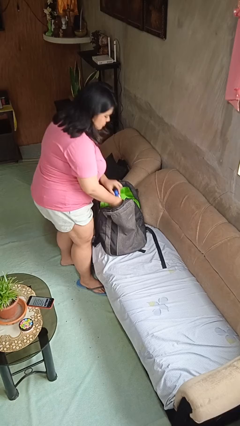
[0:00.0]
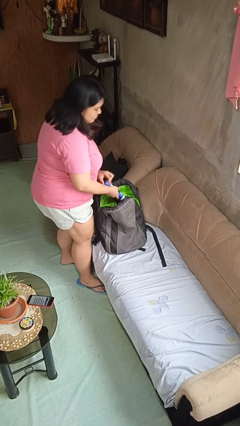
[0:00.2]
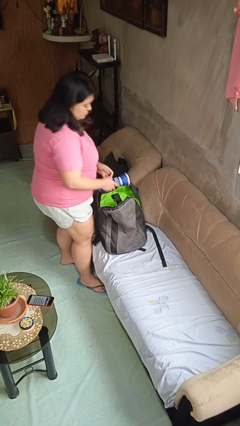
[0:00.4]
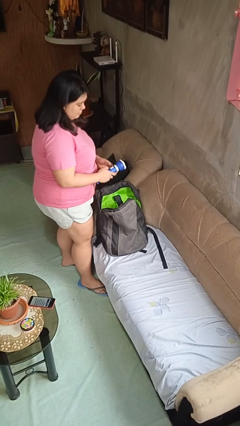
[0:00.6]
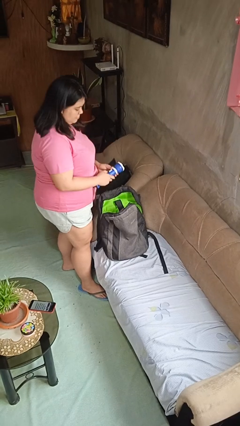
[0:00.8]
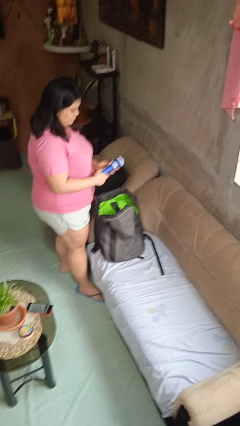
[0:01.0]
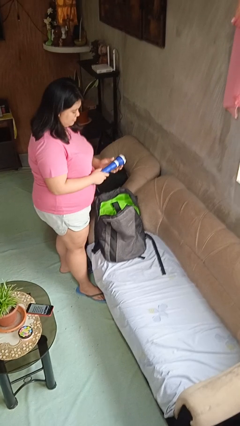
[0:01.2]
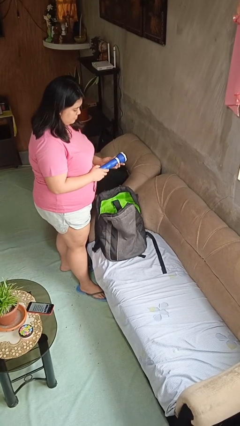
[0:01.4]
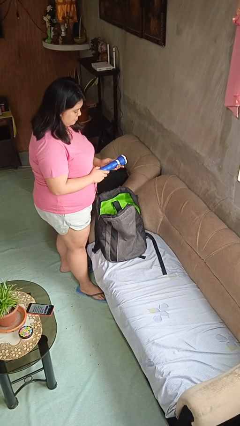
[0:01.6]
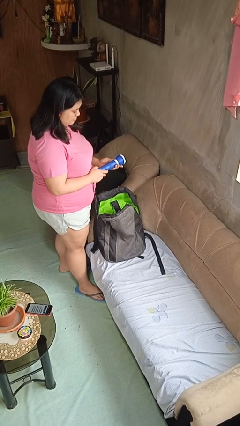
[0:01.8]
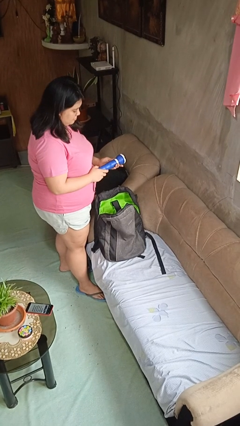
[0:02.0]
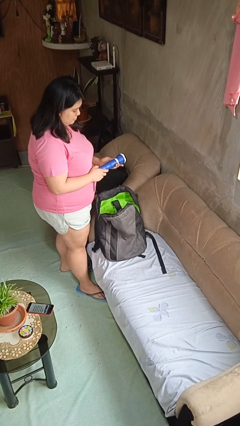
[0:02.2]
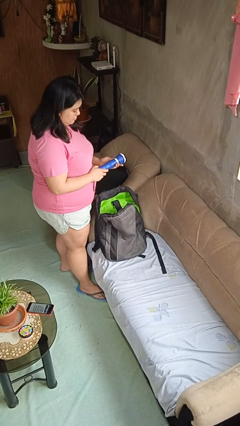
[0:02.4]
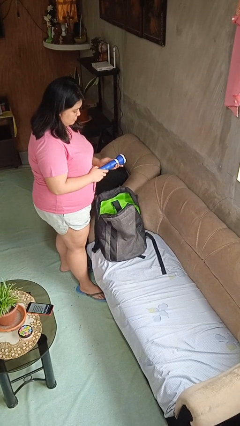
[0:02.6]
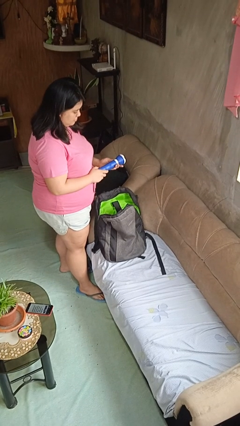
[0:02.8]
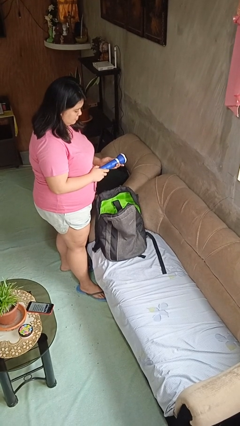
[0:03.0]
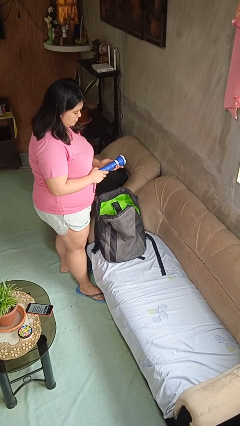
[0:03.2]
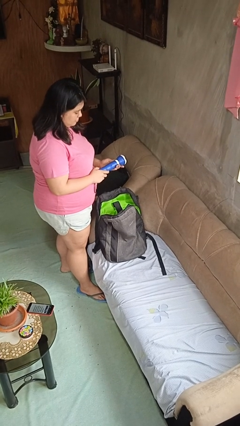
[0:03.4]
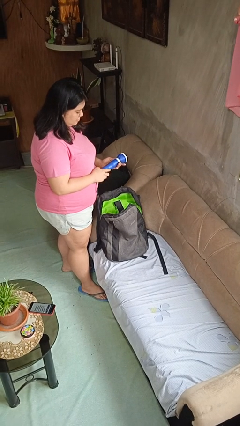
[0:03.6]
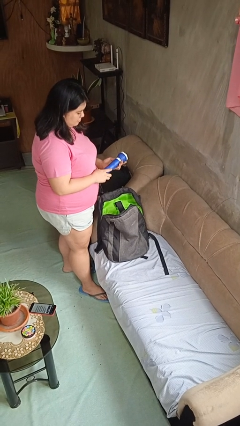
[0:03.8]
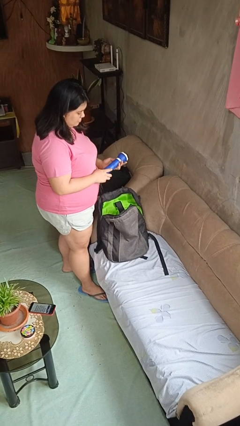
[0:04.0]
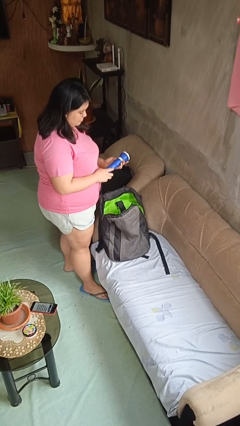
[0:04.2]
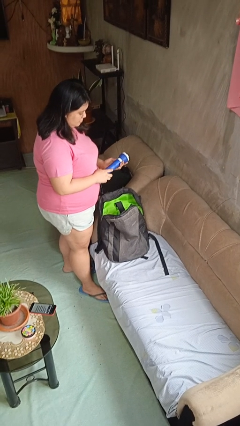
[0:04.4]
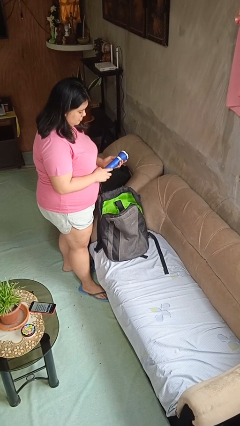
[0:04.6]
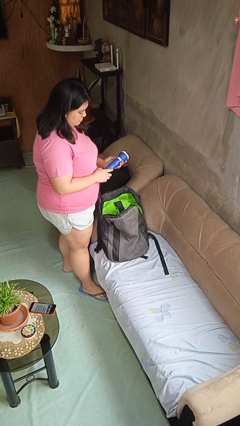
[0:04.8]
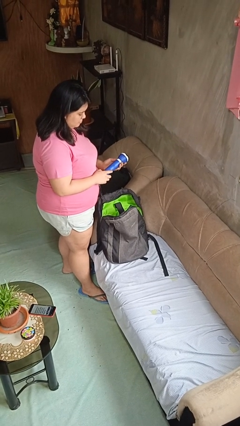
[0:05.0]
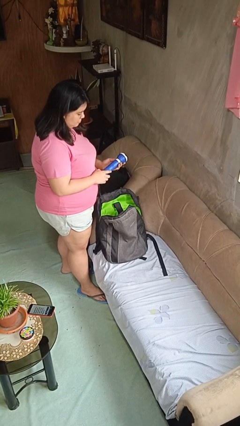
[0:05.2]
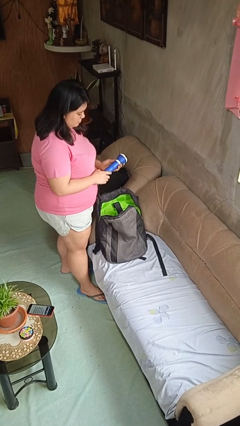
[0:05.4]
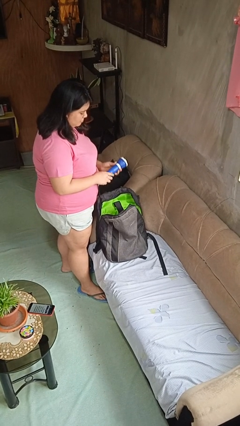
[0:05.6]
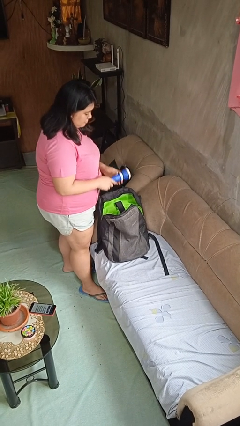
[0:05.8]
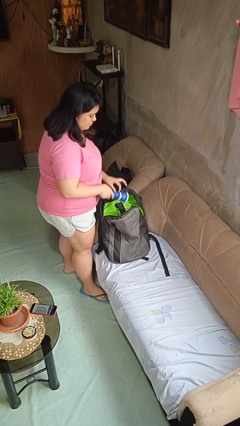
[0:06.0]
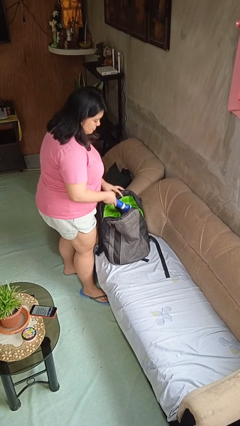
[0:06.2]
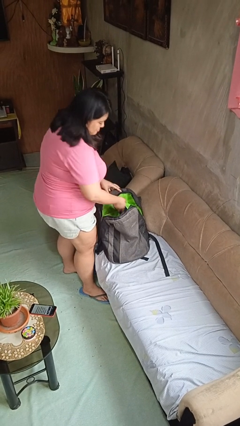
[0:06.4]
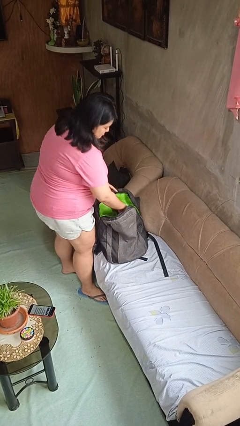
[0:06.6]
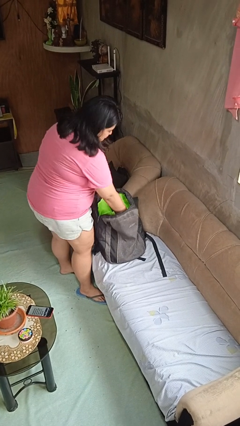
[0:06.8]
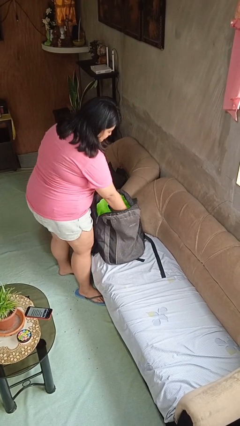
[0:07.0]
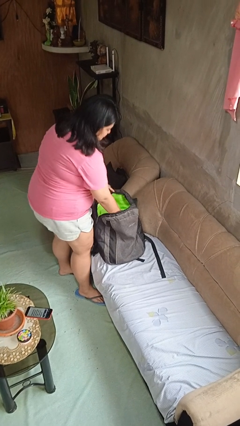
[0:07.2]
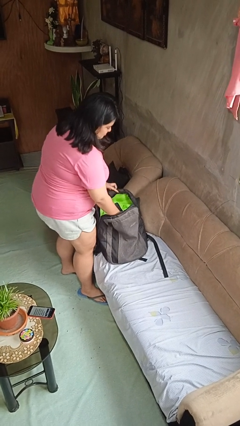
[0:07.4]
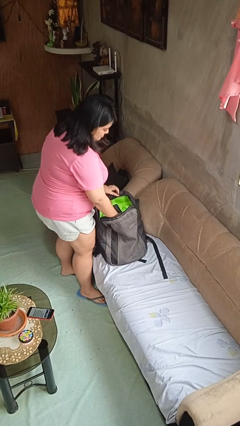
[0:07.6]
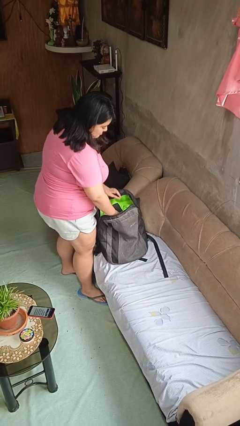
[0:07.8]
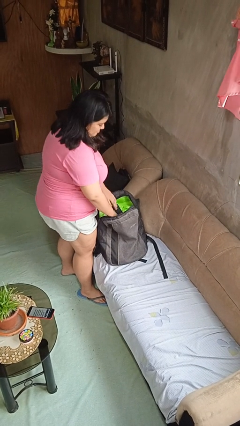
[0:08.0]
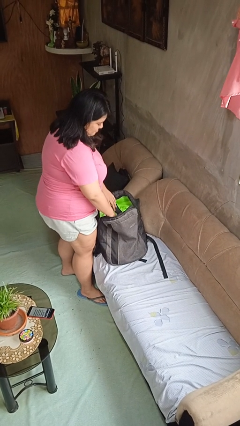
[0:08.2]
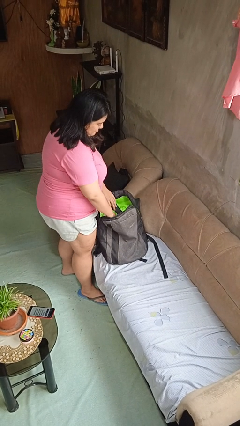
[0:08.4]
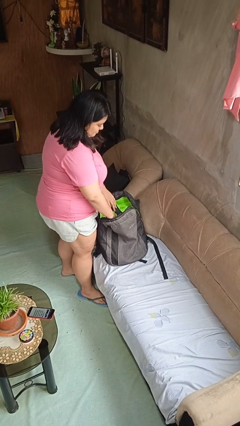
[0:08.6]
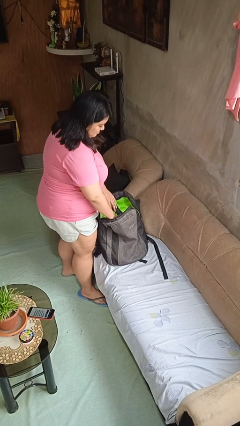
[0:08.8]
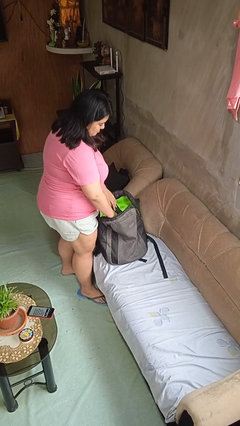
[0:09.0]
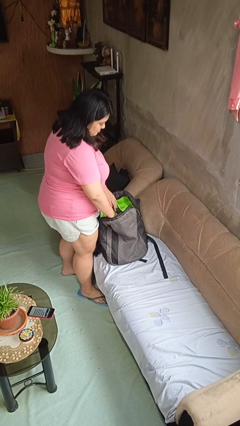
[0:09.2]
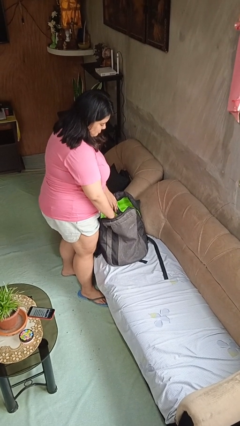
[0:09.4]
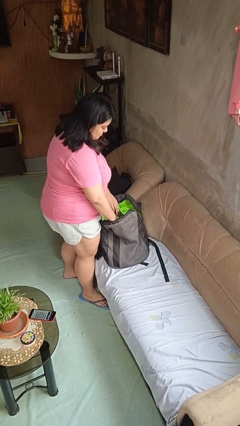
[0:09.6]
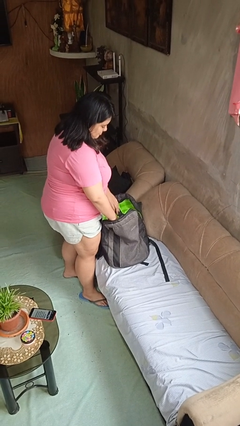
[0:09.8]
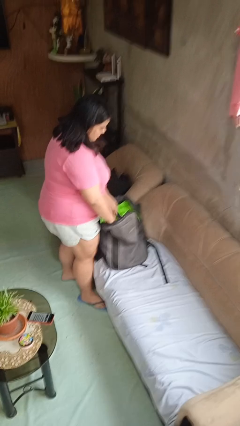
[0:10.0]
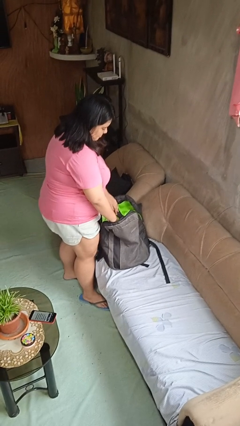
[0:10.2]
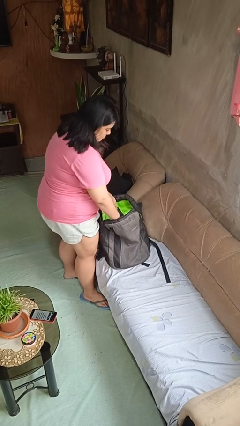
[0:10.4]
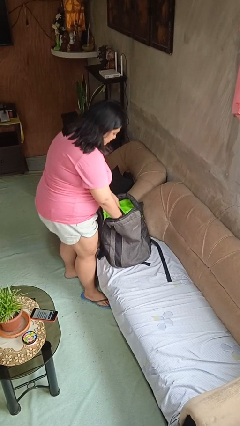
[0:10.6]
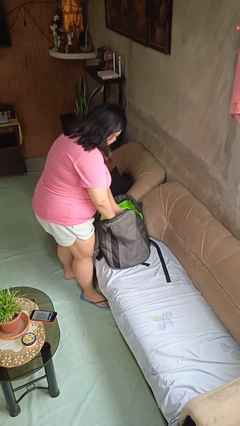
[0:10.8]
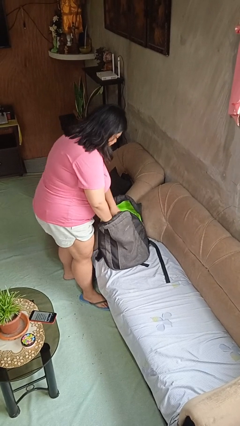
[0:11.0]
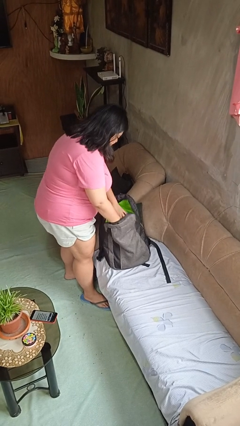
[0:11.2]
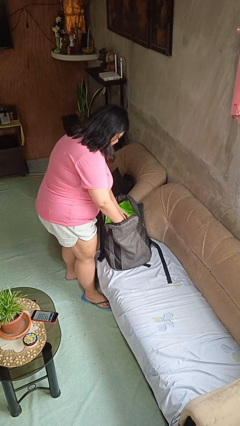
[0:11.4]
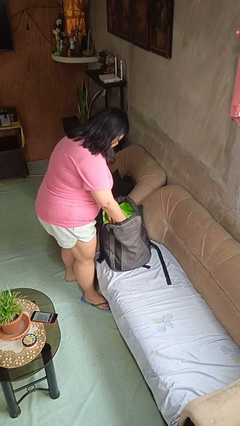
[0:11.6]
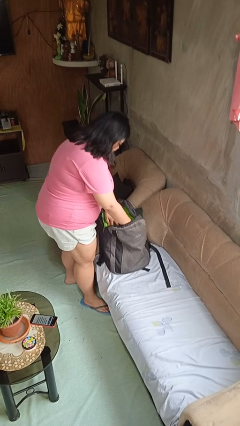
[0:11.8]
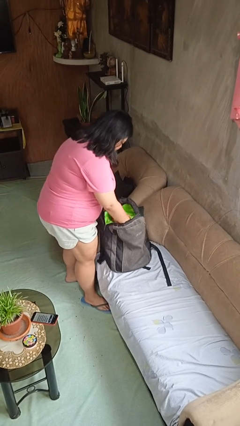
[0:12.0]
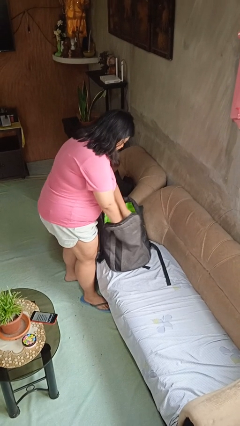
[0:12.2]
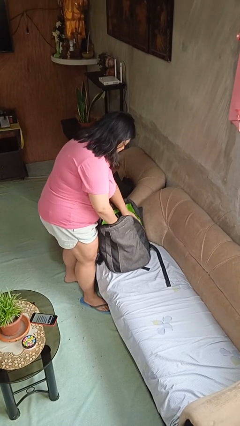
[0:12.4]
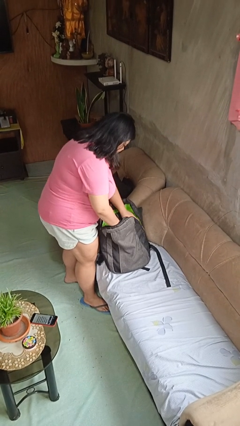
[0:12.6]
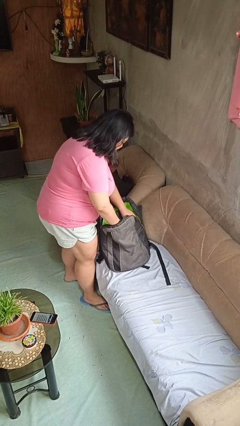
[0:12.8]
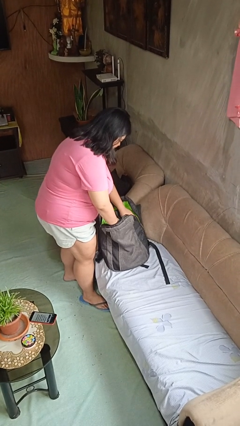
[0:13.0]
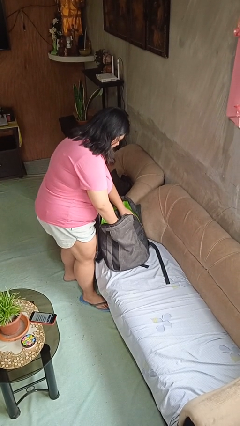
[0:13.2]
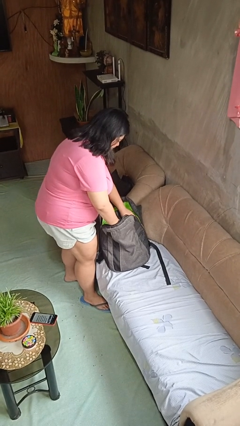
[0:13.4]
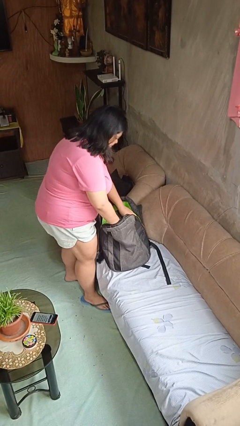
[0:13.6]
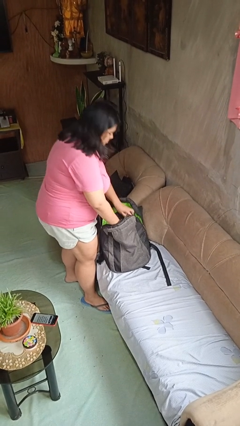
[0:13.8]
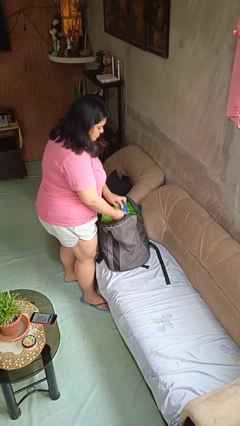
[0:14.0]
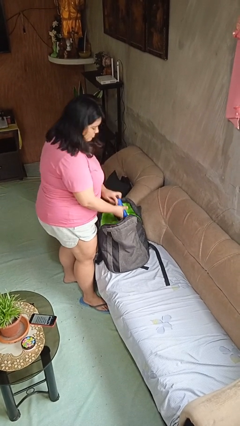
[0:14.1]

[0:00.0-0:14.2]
person takes object from backpack

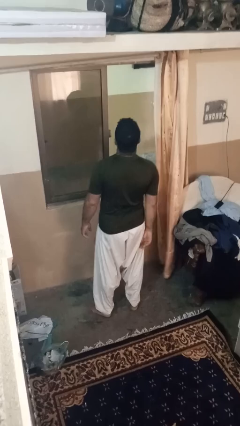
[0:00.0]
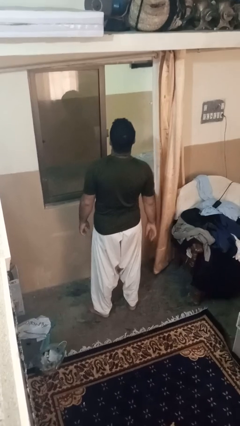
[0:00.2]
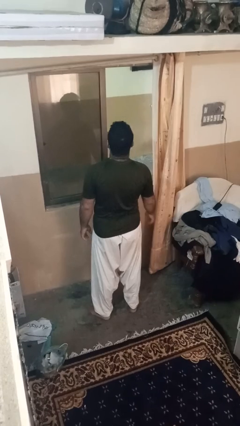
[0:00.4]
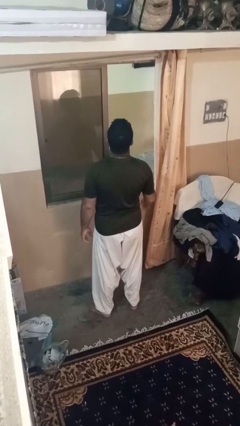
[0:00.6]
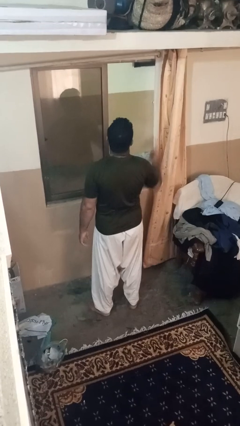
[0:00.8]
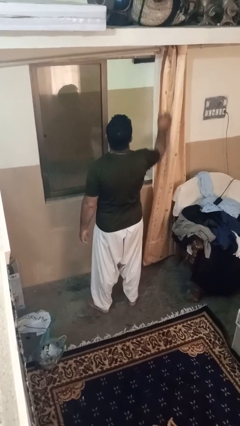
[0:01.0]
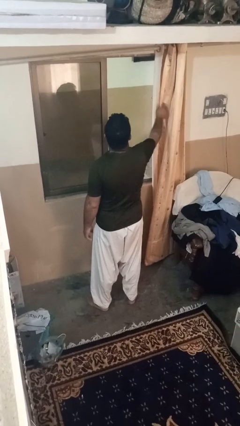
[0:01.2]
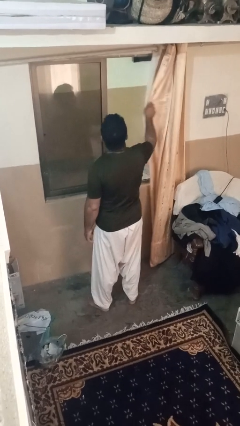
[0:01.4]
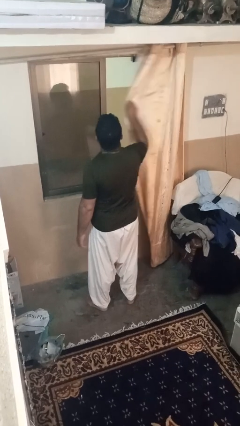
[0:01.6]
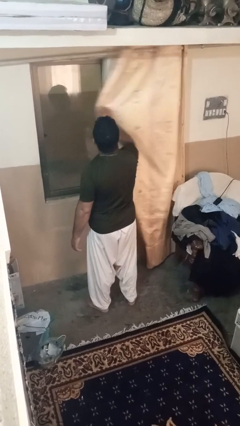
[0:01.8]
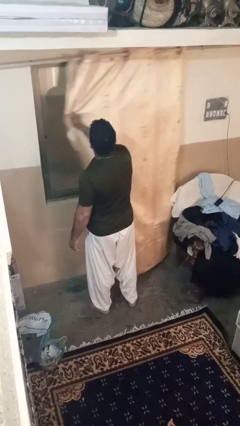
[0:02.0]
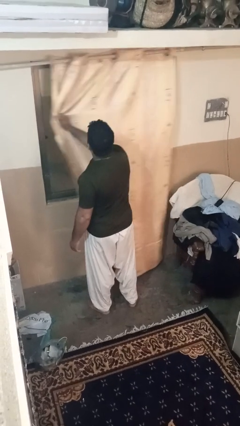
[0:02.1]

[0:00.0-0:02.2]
person closes curtains

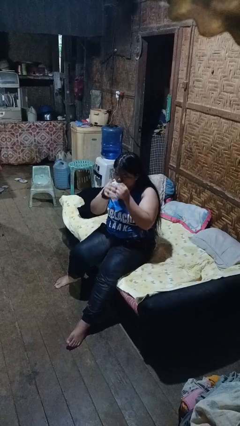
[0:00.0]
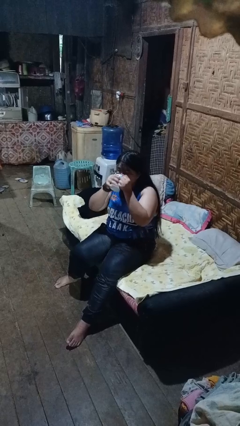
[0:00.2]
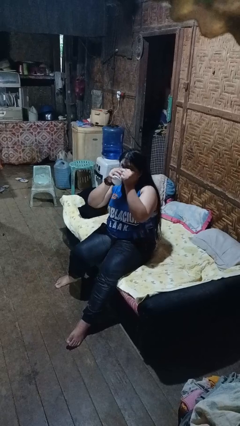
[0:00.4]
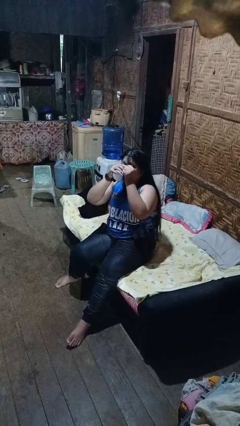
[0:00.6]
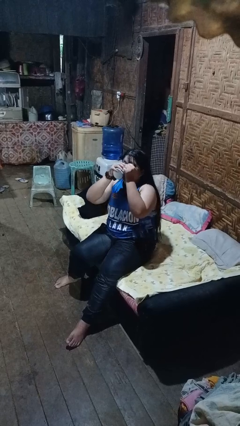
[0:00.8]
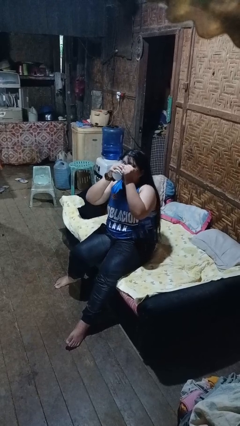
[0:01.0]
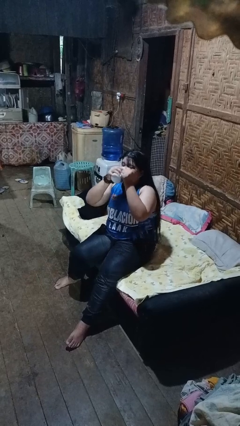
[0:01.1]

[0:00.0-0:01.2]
person drinks from mug

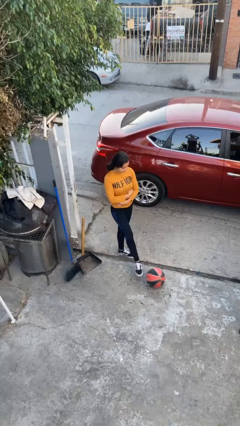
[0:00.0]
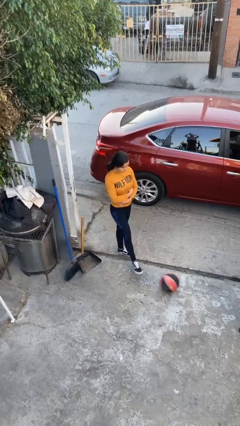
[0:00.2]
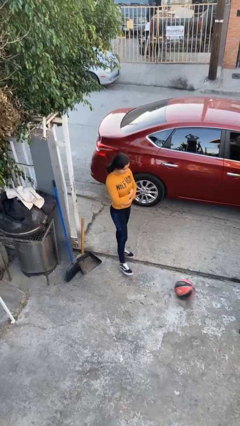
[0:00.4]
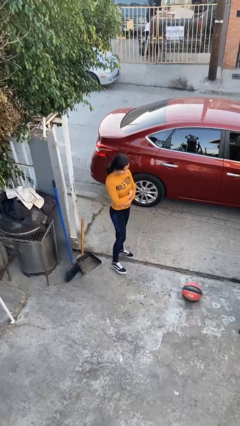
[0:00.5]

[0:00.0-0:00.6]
person kicks object to person
